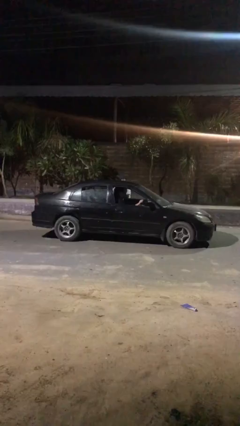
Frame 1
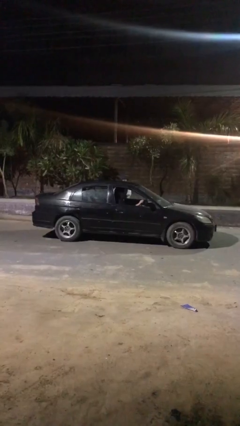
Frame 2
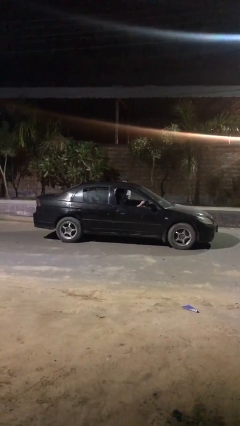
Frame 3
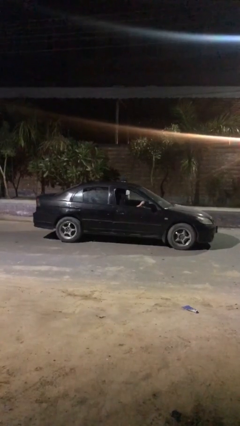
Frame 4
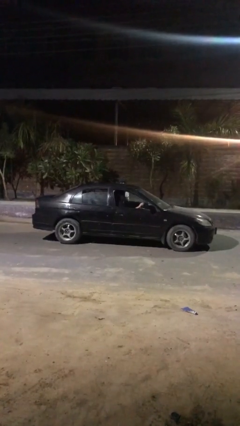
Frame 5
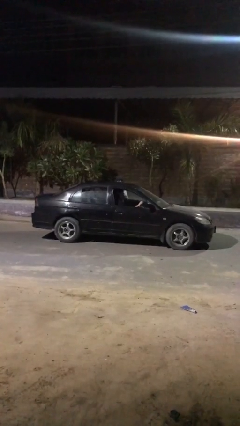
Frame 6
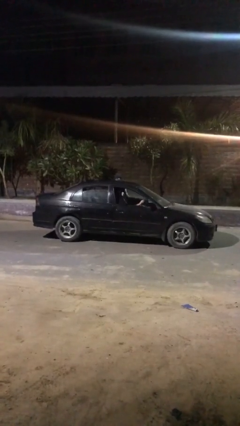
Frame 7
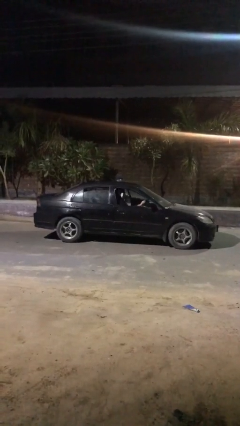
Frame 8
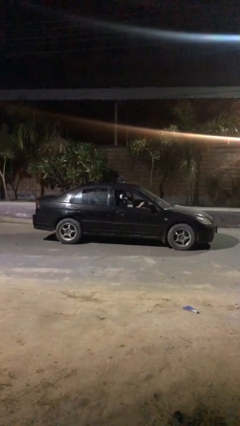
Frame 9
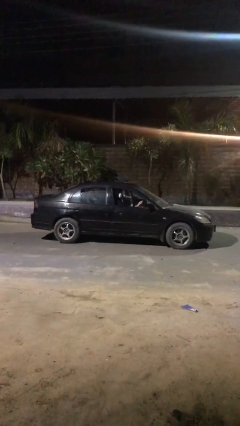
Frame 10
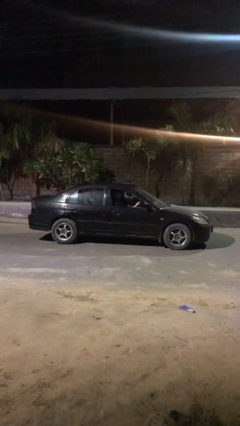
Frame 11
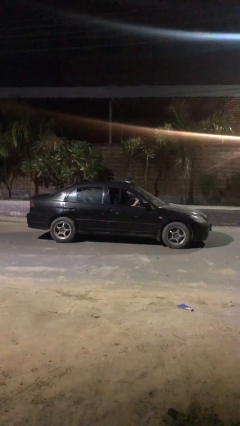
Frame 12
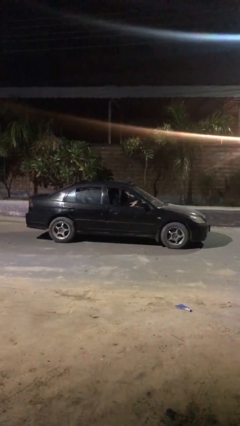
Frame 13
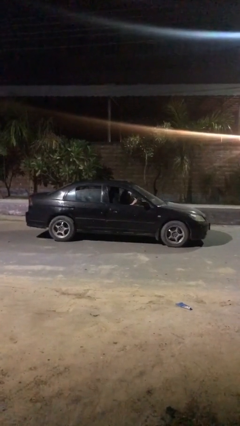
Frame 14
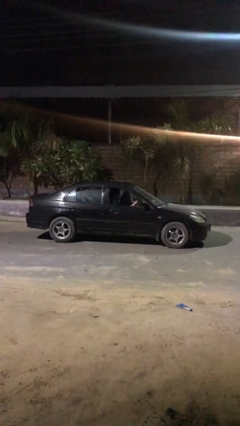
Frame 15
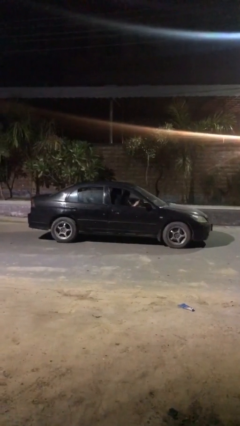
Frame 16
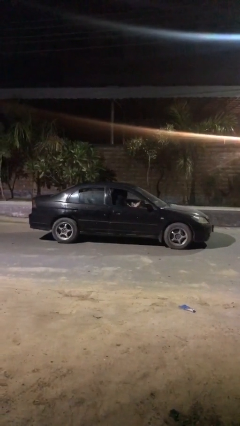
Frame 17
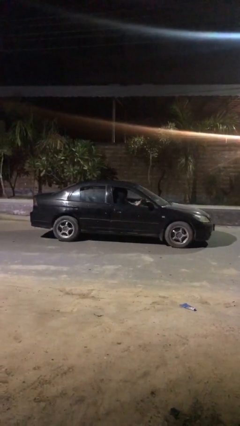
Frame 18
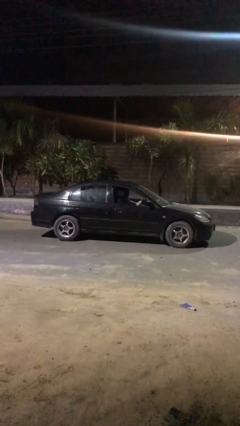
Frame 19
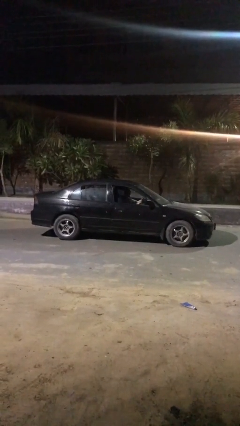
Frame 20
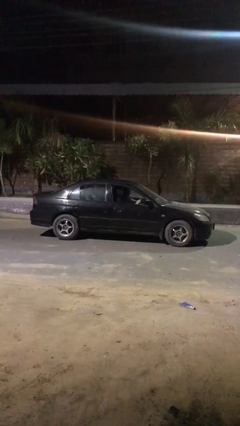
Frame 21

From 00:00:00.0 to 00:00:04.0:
car picks up person

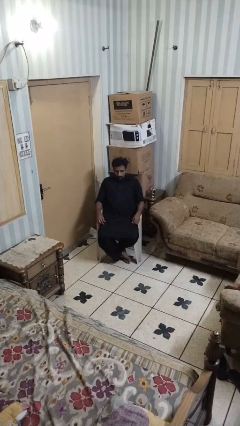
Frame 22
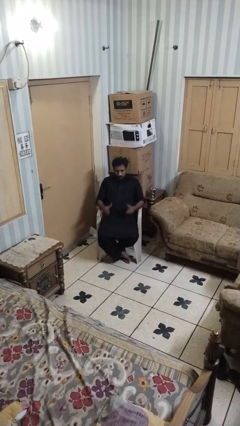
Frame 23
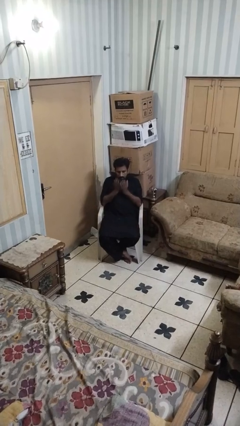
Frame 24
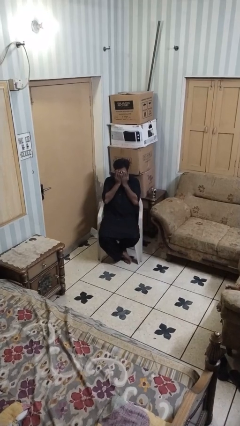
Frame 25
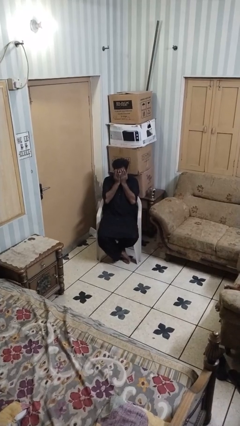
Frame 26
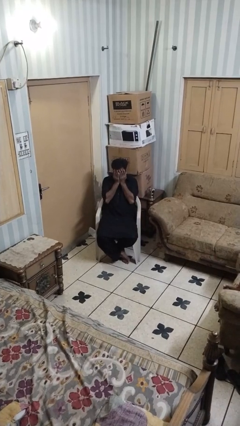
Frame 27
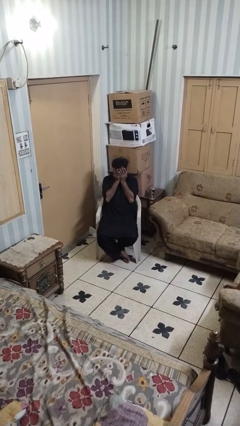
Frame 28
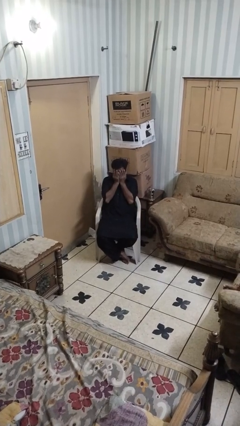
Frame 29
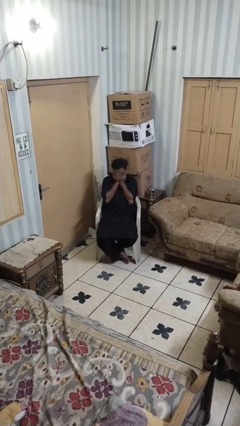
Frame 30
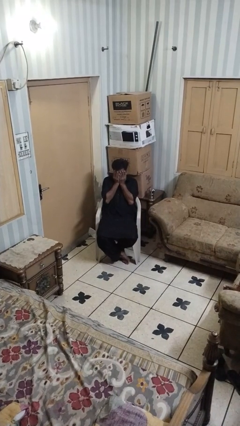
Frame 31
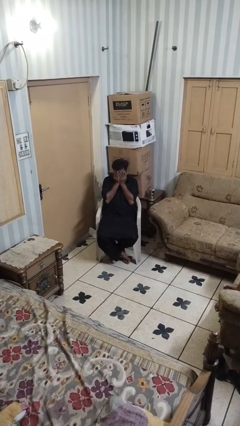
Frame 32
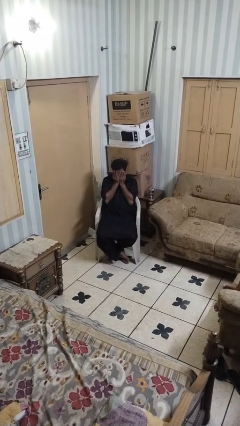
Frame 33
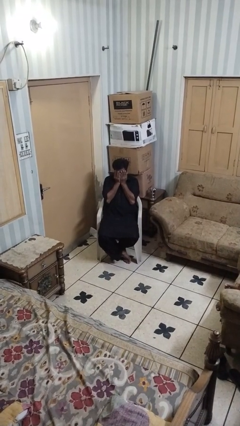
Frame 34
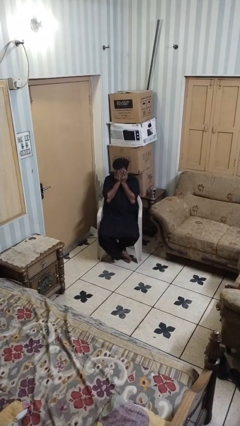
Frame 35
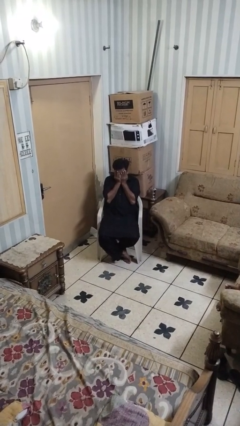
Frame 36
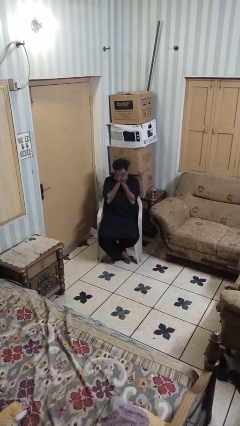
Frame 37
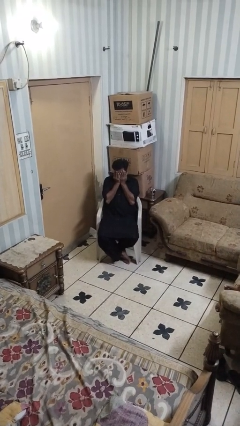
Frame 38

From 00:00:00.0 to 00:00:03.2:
person covers face with hands

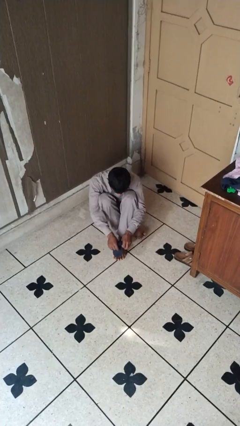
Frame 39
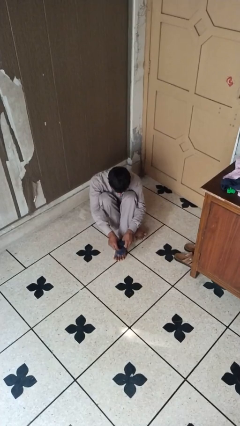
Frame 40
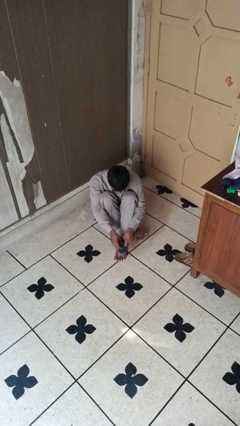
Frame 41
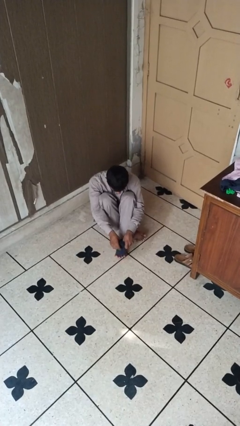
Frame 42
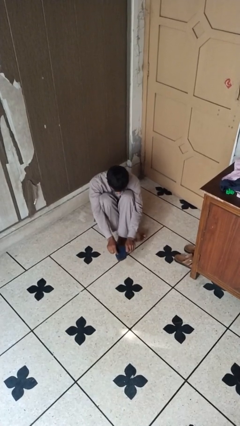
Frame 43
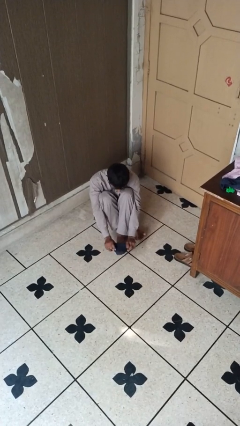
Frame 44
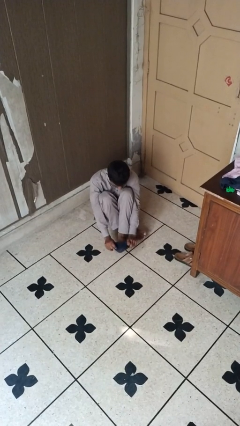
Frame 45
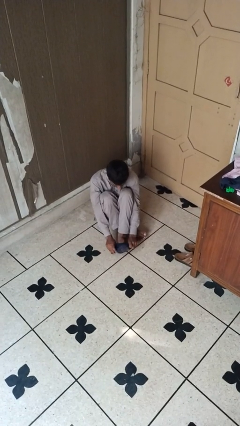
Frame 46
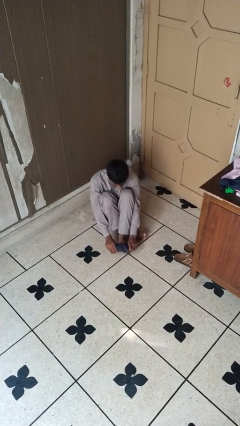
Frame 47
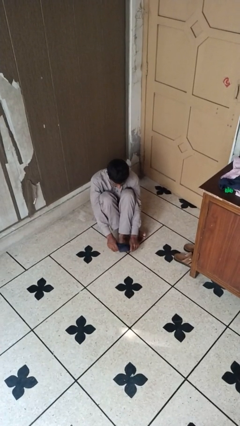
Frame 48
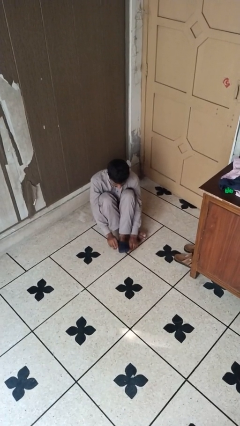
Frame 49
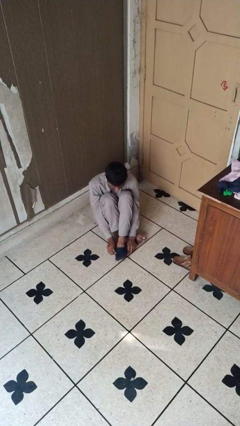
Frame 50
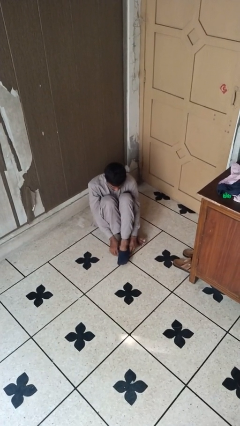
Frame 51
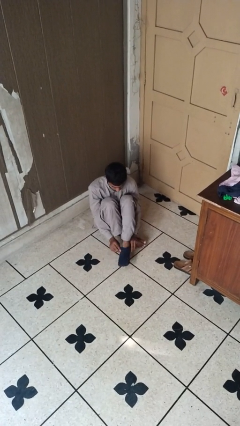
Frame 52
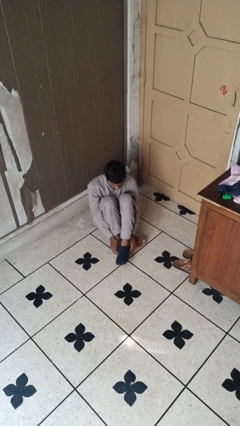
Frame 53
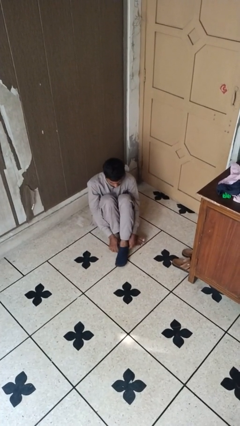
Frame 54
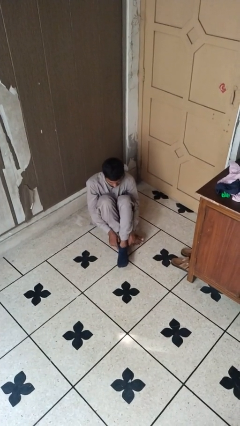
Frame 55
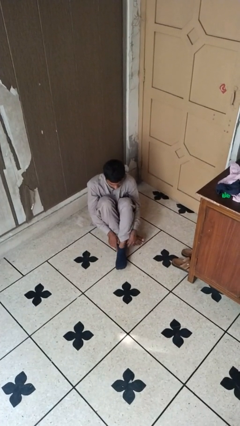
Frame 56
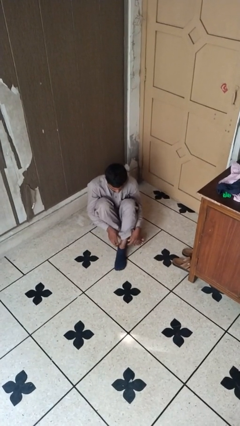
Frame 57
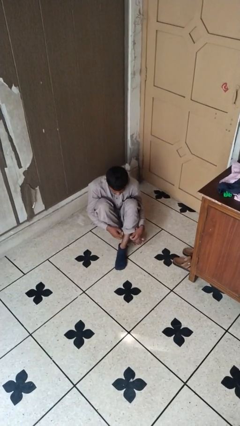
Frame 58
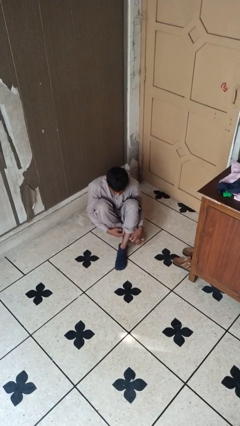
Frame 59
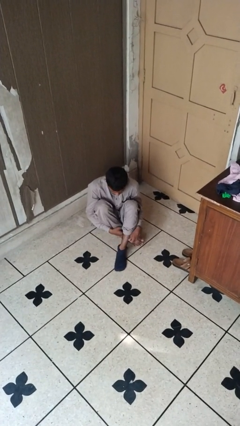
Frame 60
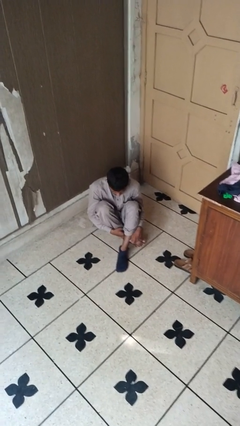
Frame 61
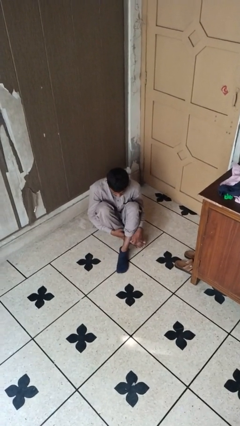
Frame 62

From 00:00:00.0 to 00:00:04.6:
person puts on socks

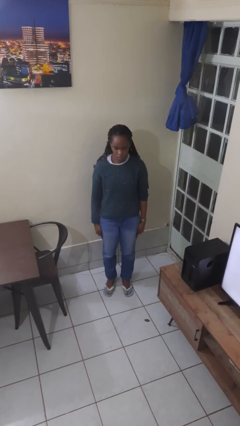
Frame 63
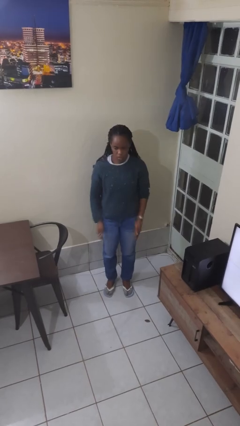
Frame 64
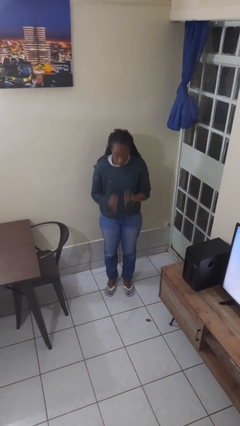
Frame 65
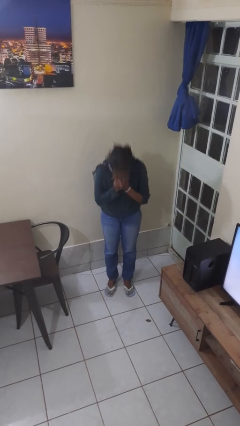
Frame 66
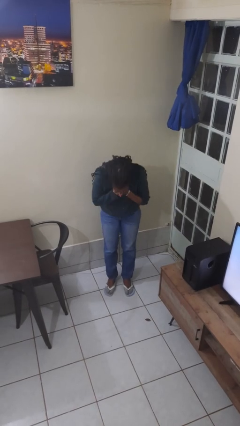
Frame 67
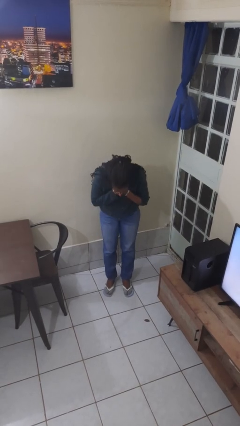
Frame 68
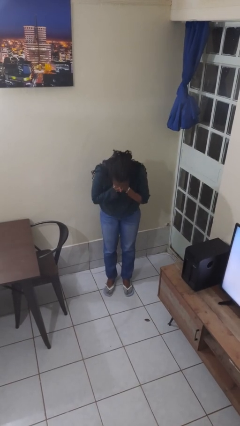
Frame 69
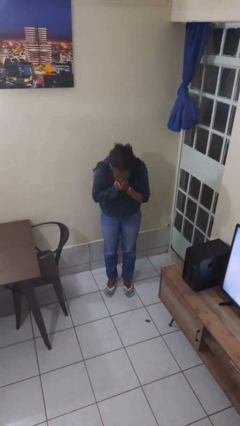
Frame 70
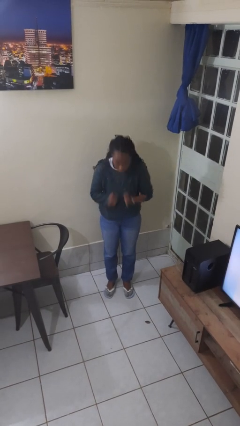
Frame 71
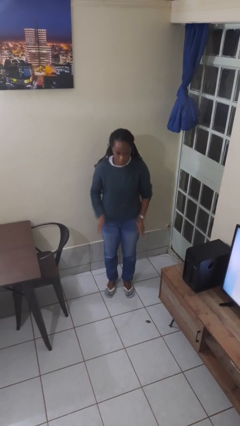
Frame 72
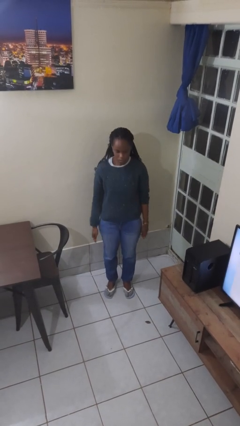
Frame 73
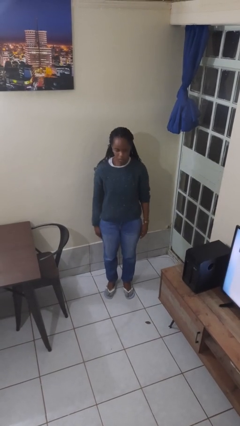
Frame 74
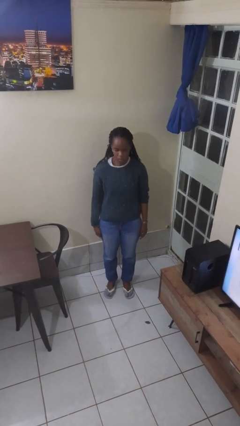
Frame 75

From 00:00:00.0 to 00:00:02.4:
person sneezes into hand

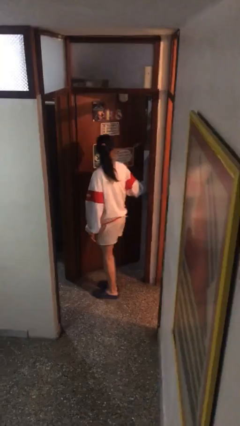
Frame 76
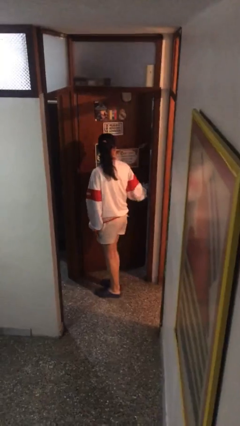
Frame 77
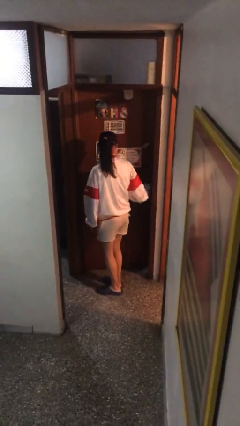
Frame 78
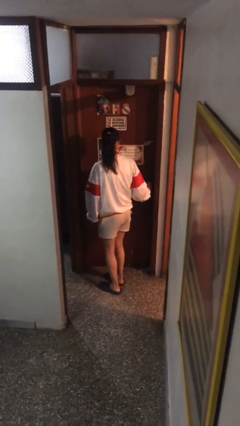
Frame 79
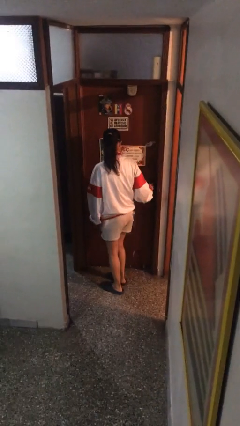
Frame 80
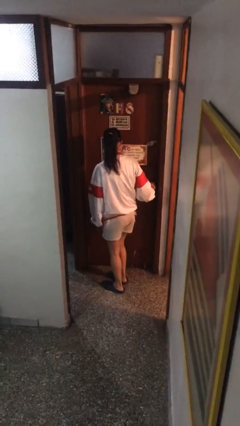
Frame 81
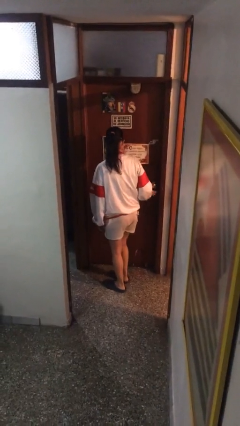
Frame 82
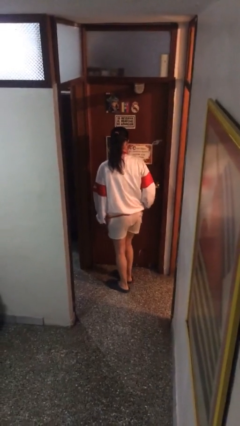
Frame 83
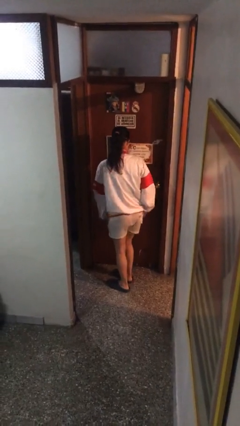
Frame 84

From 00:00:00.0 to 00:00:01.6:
person closes facility door

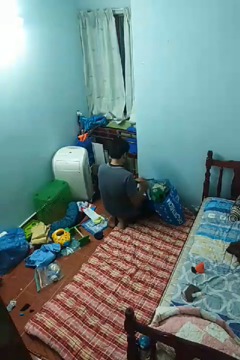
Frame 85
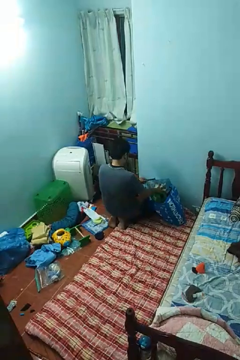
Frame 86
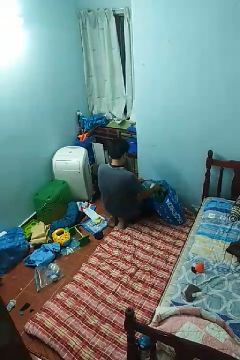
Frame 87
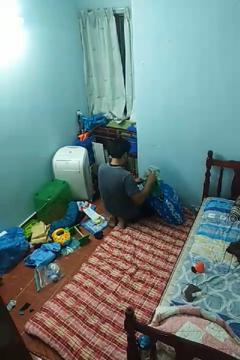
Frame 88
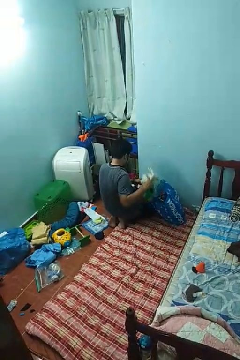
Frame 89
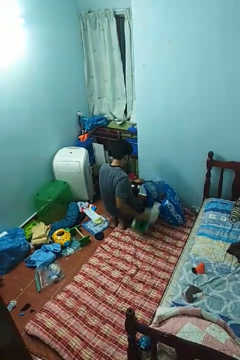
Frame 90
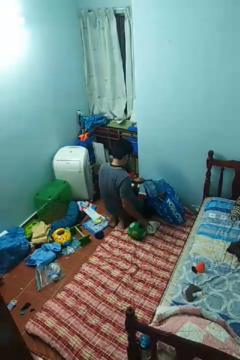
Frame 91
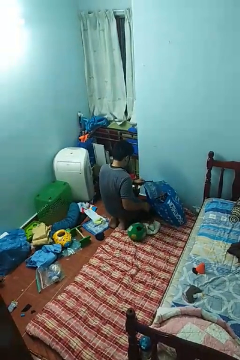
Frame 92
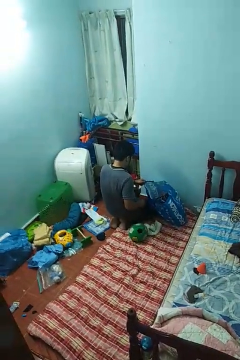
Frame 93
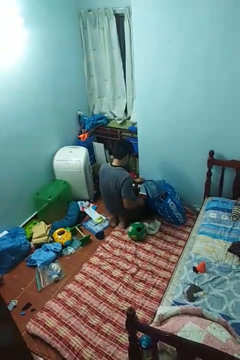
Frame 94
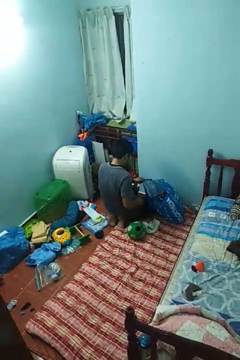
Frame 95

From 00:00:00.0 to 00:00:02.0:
person takes object from bag
